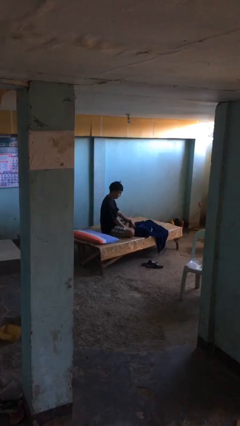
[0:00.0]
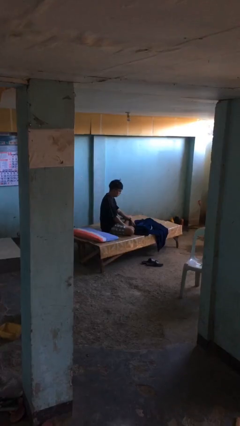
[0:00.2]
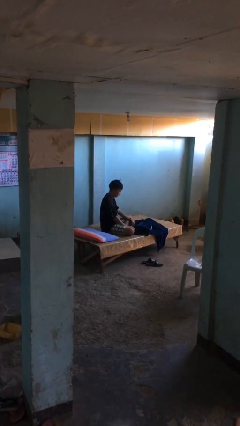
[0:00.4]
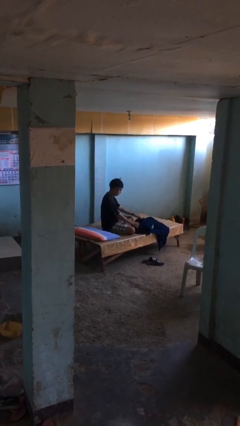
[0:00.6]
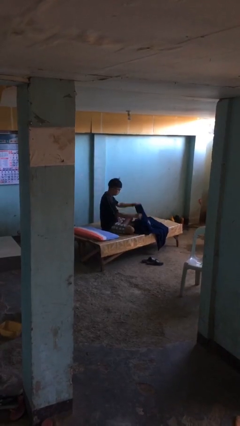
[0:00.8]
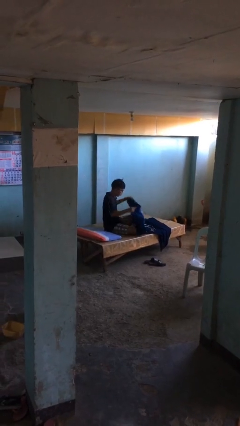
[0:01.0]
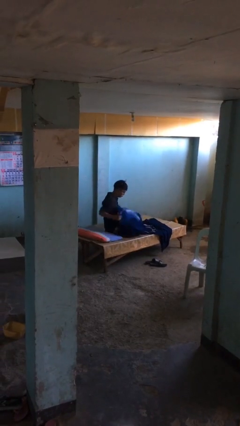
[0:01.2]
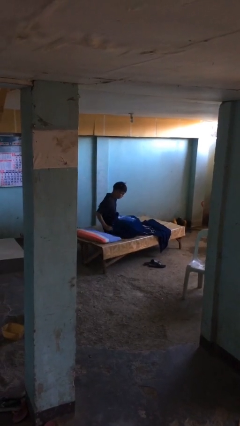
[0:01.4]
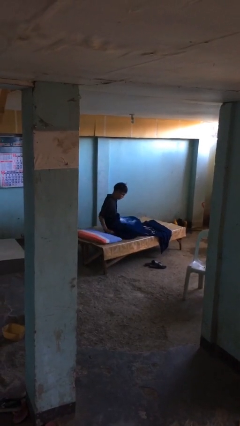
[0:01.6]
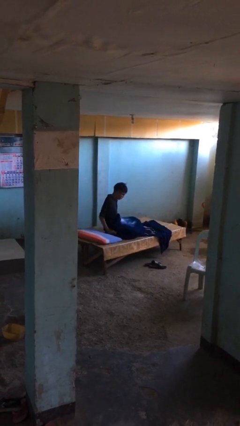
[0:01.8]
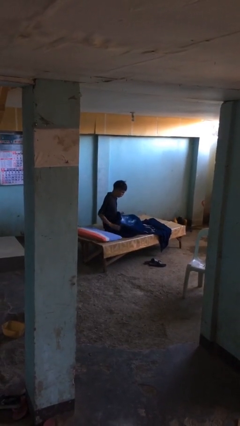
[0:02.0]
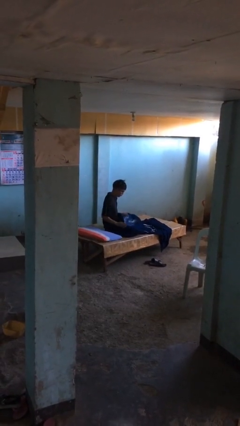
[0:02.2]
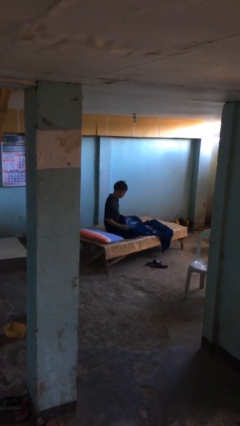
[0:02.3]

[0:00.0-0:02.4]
person covers with blanket

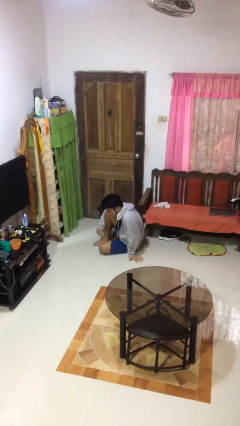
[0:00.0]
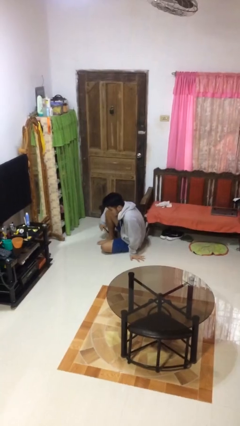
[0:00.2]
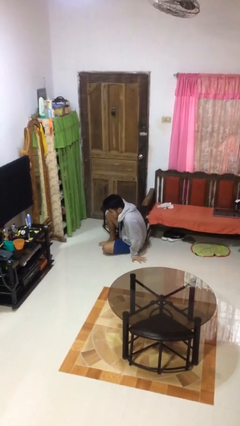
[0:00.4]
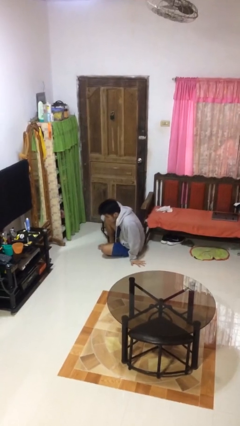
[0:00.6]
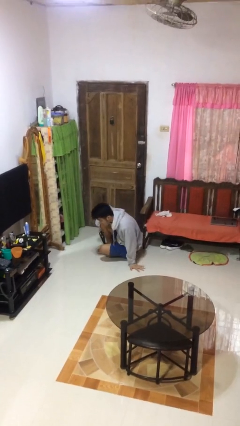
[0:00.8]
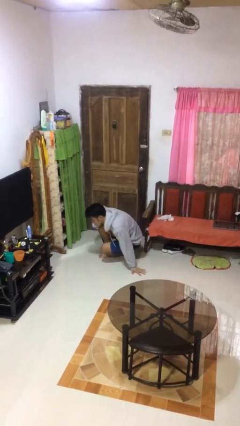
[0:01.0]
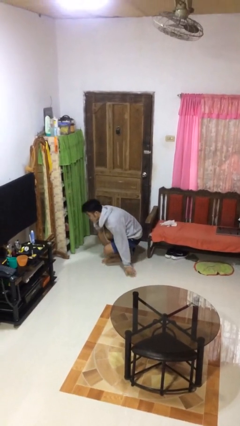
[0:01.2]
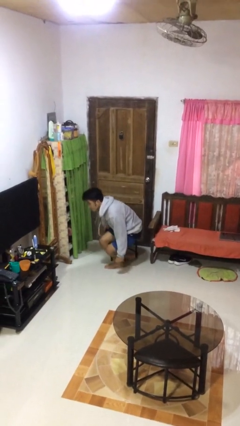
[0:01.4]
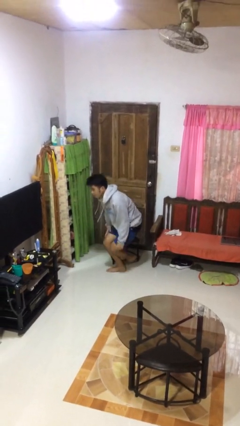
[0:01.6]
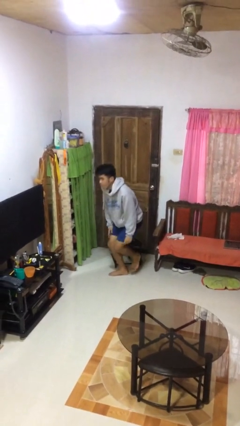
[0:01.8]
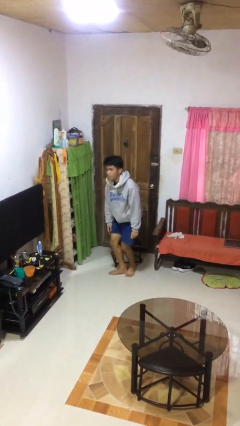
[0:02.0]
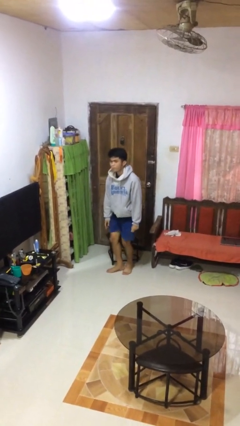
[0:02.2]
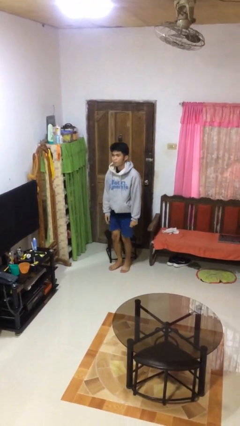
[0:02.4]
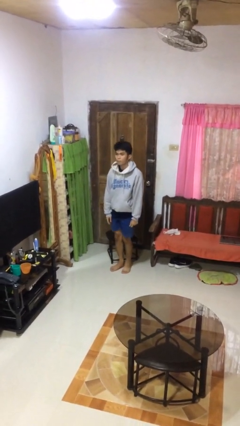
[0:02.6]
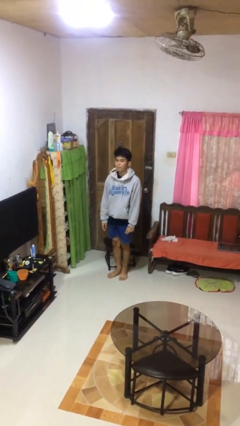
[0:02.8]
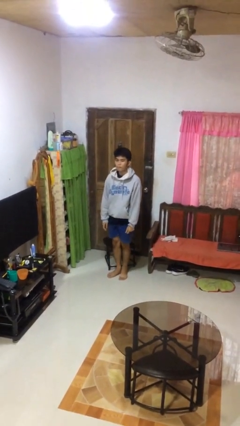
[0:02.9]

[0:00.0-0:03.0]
person stands up from floor

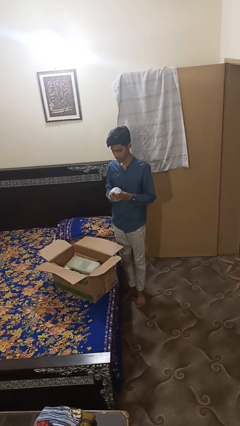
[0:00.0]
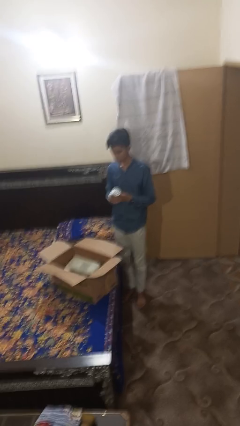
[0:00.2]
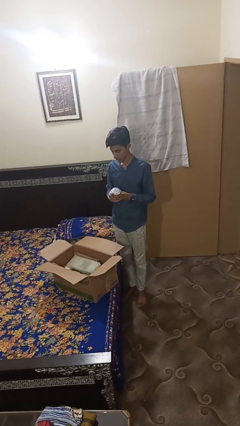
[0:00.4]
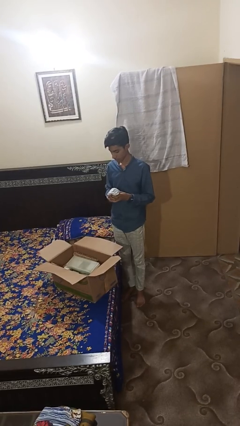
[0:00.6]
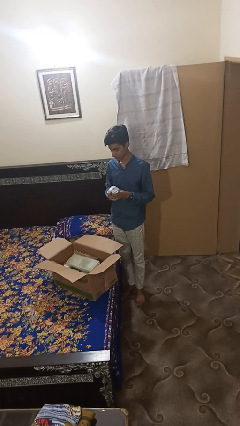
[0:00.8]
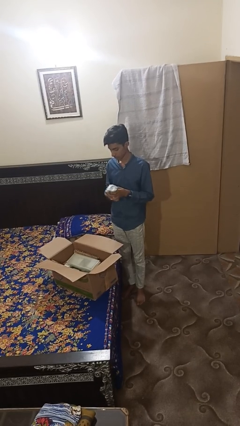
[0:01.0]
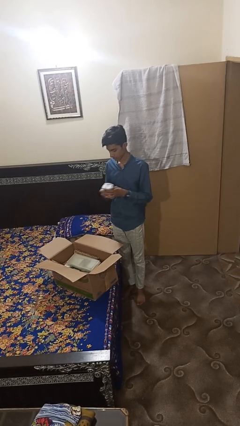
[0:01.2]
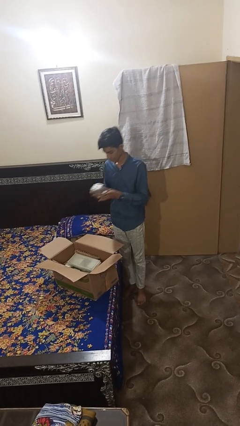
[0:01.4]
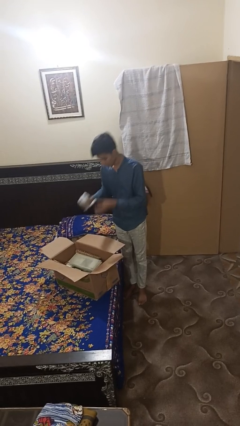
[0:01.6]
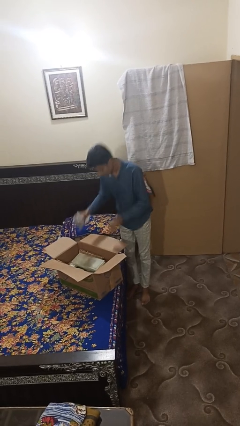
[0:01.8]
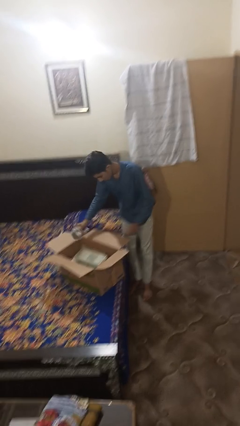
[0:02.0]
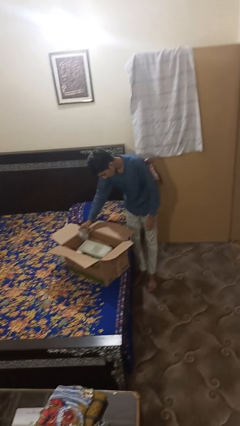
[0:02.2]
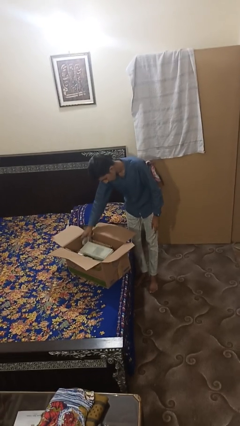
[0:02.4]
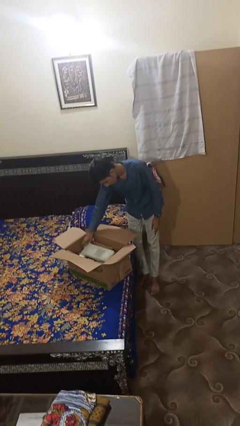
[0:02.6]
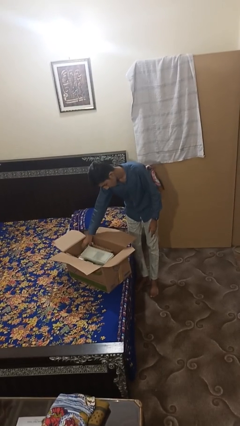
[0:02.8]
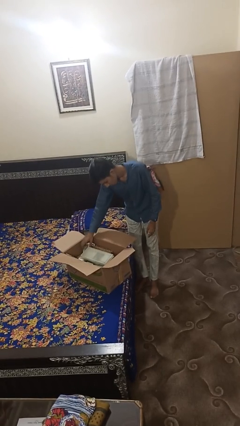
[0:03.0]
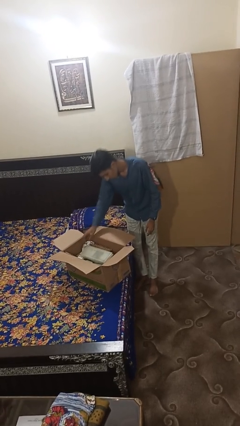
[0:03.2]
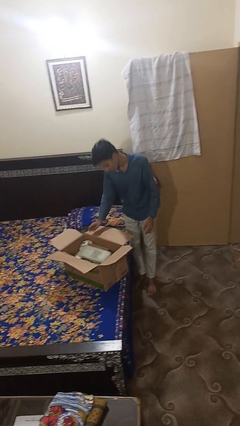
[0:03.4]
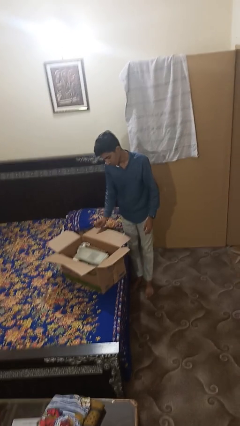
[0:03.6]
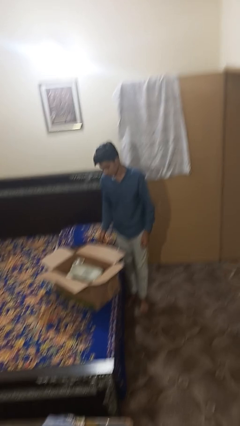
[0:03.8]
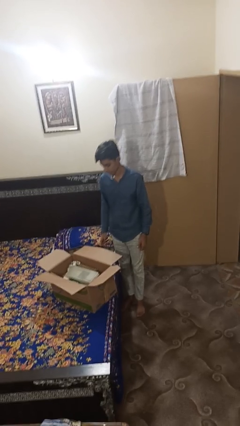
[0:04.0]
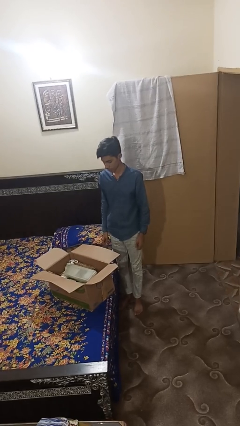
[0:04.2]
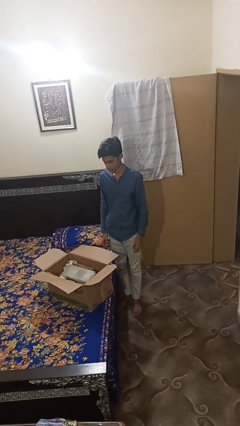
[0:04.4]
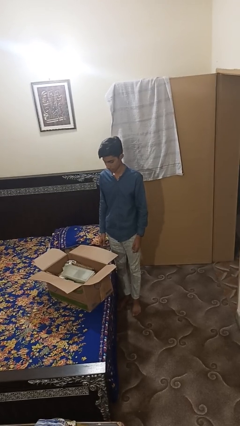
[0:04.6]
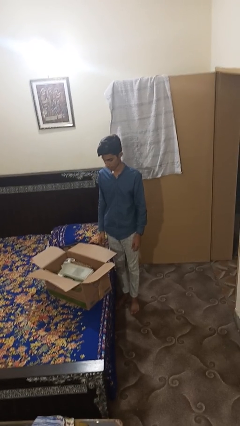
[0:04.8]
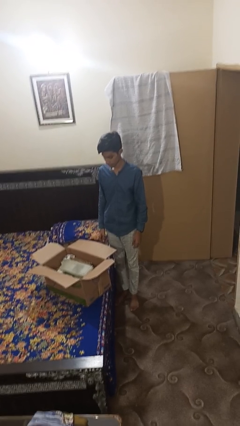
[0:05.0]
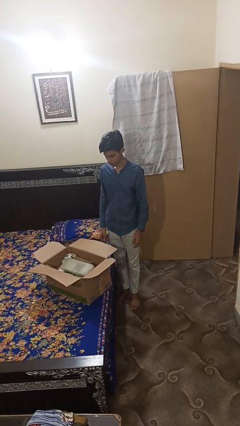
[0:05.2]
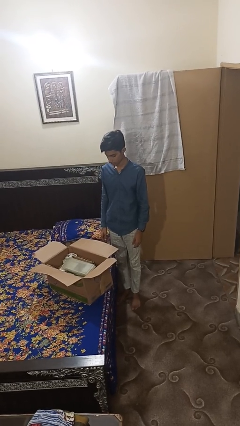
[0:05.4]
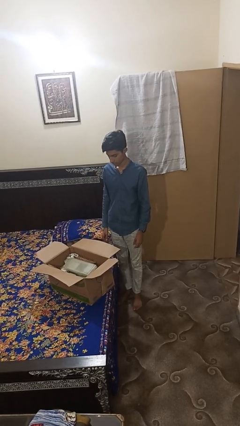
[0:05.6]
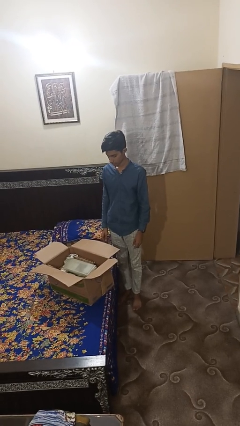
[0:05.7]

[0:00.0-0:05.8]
person puts object into box

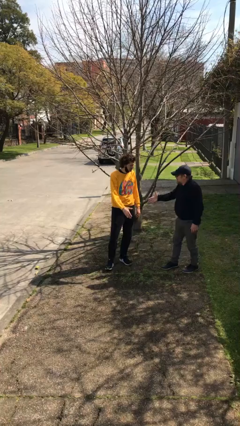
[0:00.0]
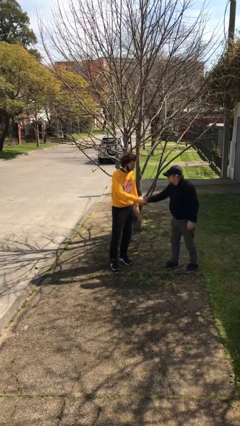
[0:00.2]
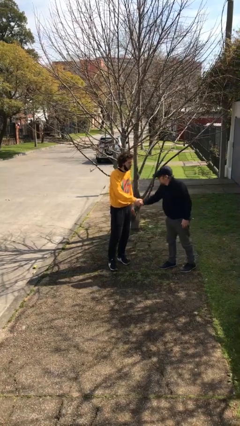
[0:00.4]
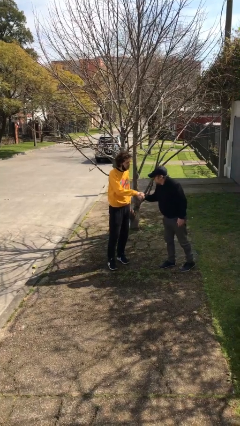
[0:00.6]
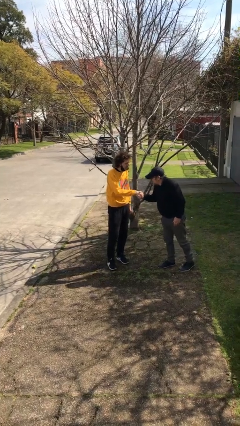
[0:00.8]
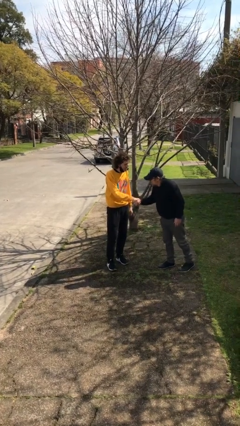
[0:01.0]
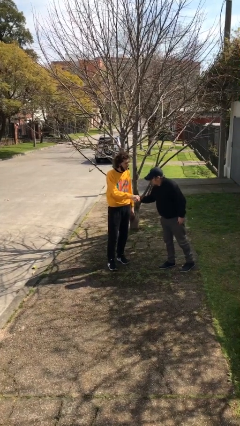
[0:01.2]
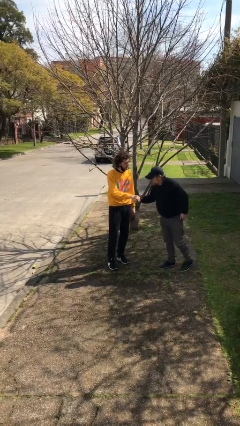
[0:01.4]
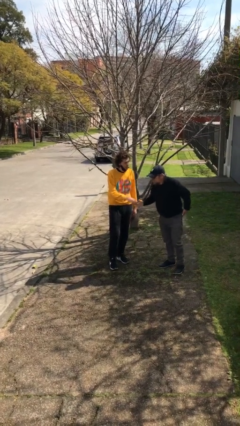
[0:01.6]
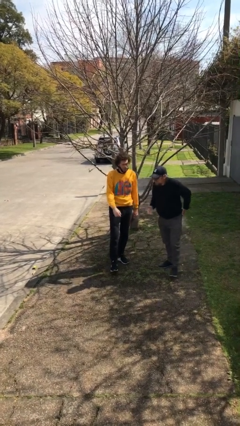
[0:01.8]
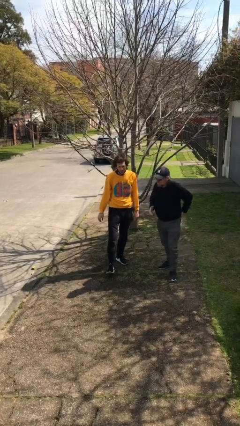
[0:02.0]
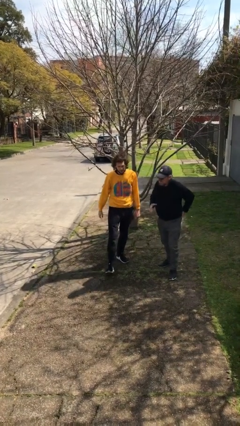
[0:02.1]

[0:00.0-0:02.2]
person shakes hand

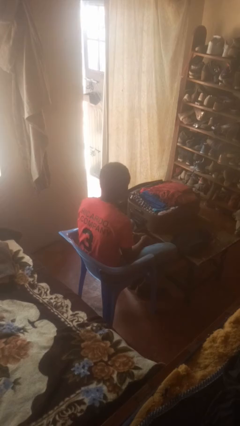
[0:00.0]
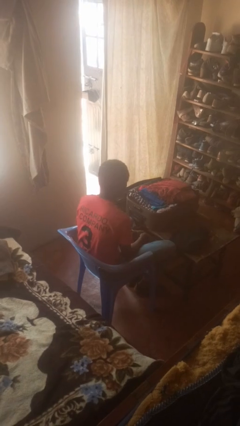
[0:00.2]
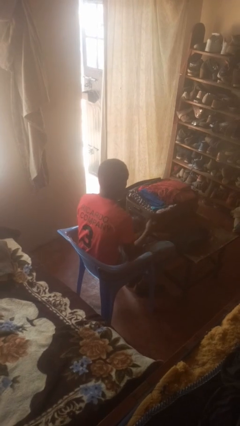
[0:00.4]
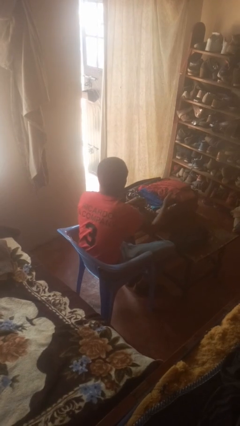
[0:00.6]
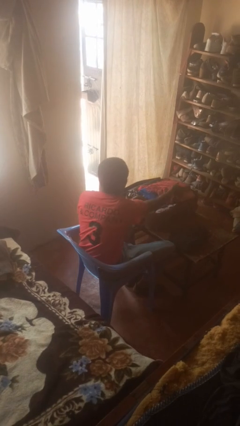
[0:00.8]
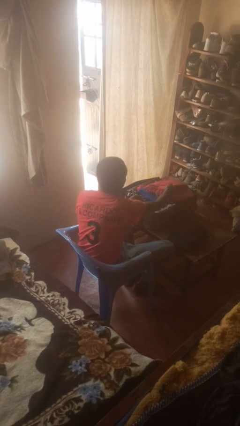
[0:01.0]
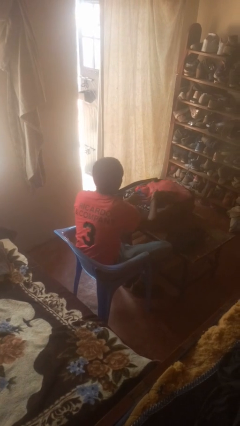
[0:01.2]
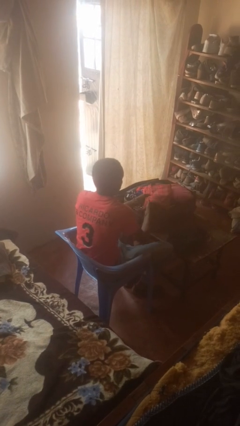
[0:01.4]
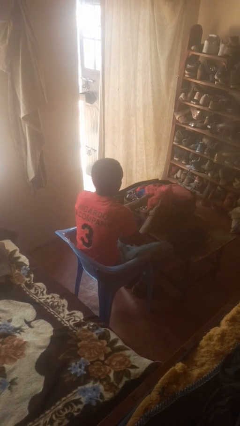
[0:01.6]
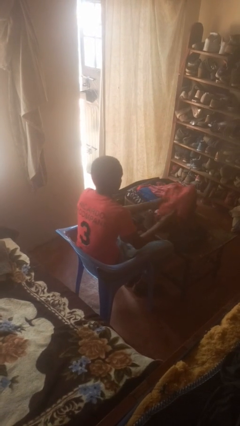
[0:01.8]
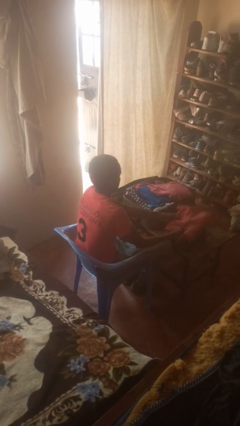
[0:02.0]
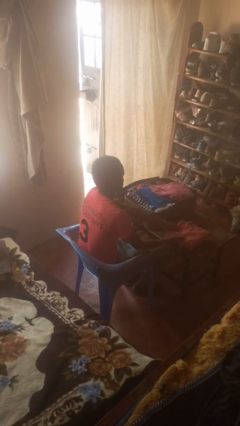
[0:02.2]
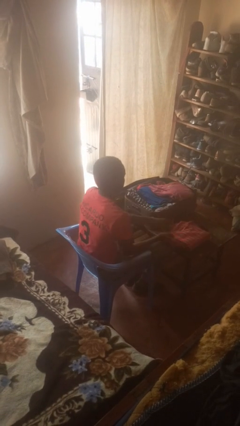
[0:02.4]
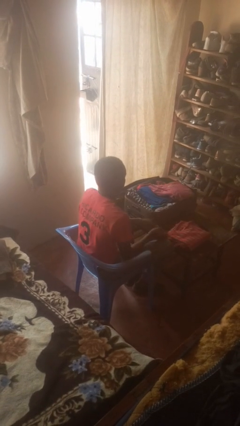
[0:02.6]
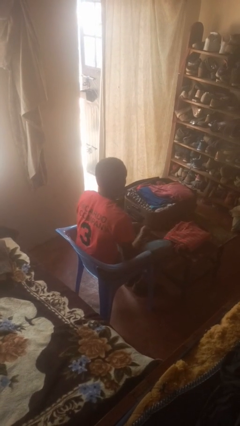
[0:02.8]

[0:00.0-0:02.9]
person unloads clothes from suitcase

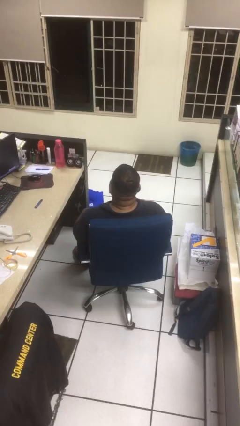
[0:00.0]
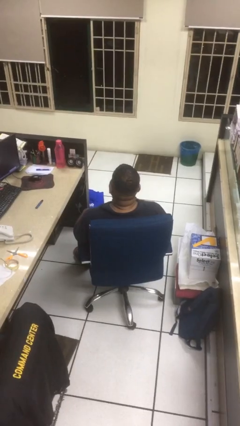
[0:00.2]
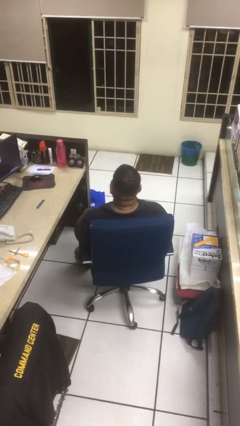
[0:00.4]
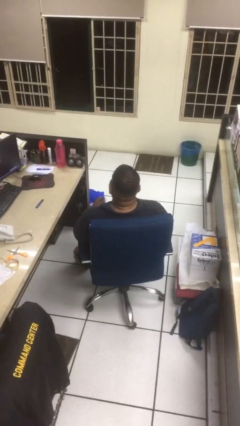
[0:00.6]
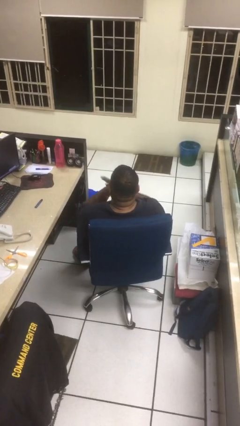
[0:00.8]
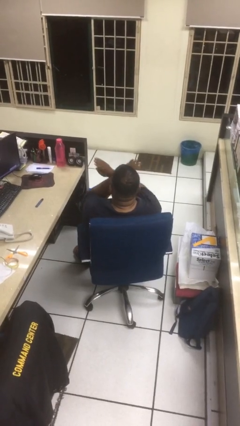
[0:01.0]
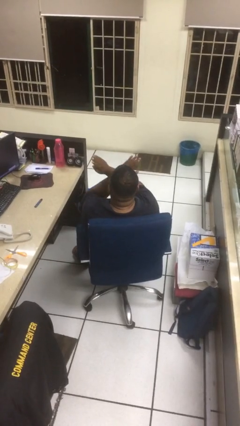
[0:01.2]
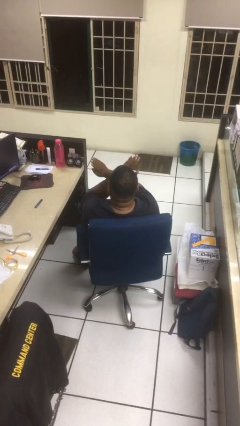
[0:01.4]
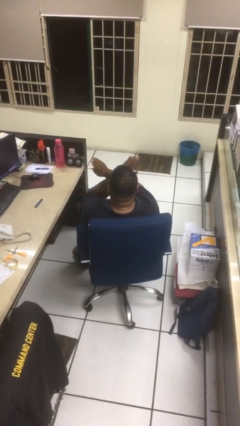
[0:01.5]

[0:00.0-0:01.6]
person gestures arms x
